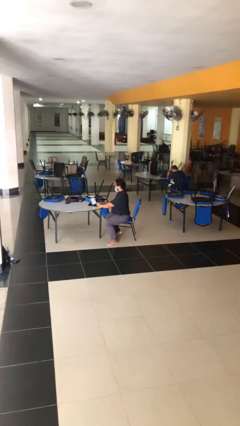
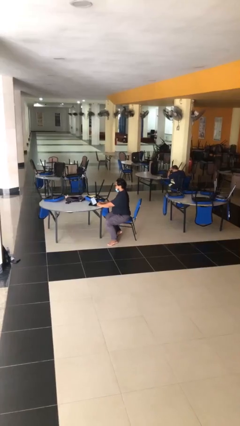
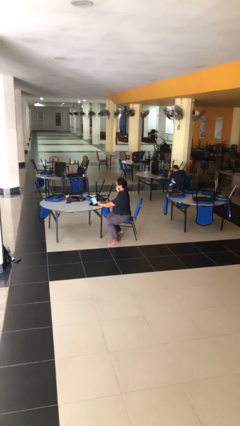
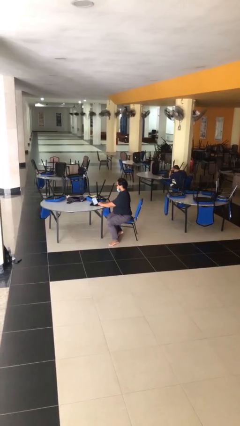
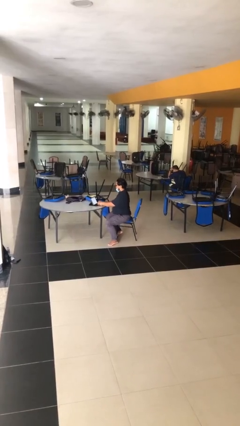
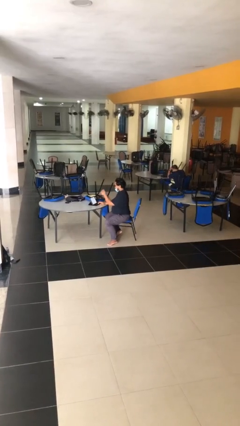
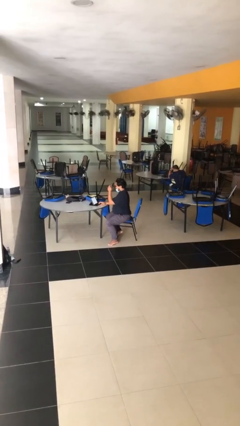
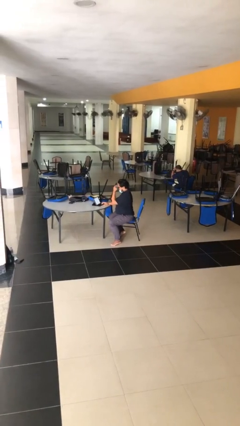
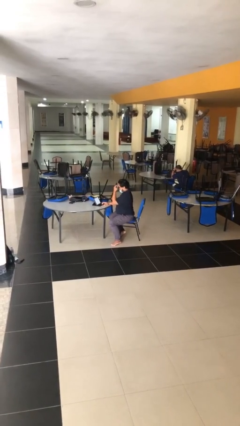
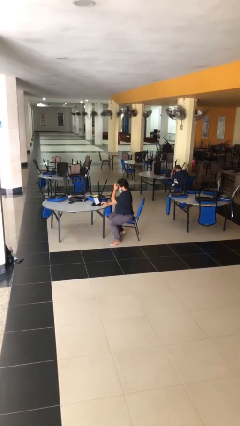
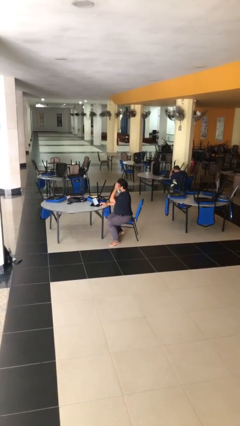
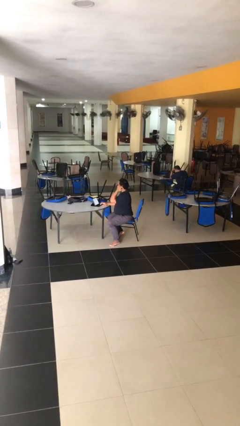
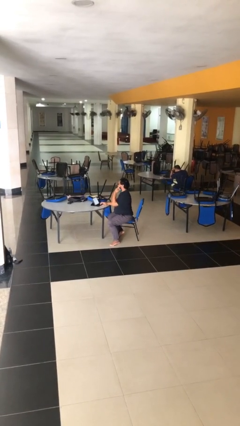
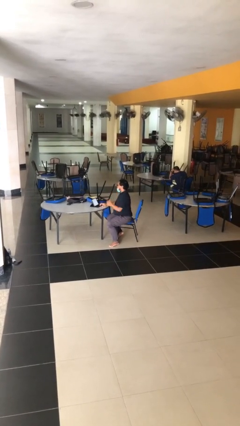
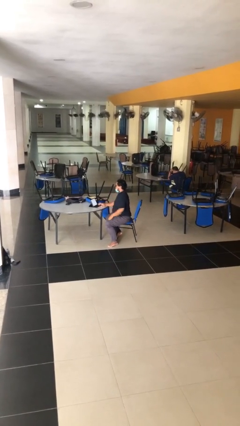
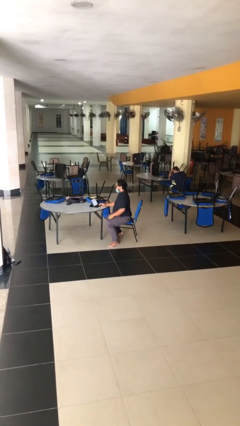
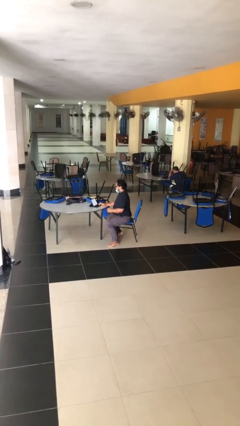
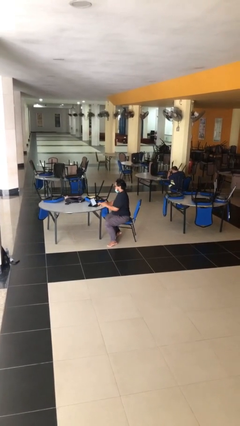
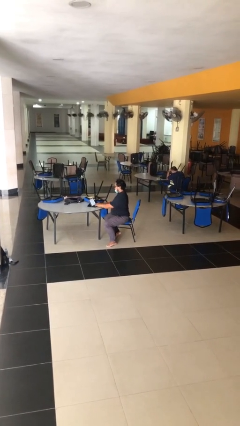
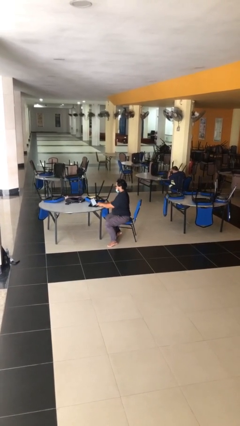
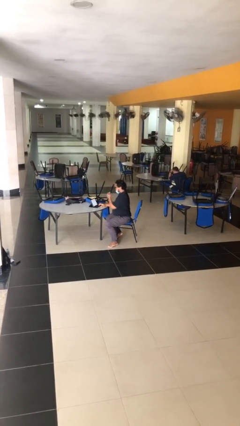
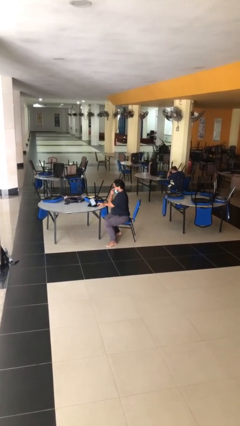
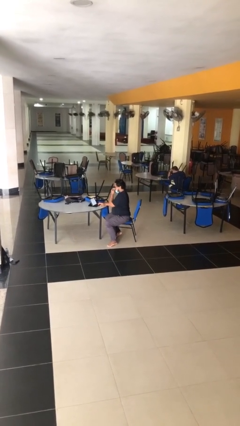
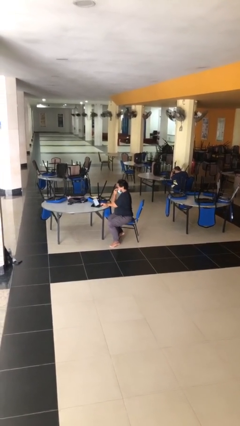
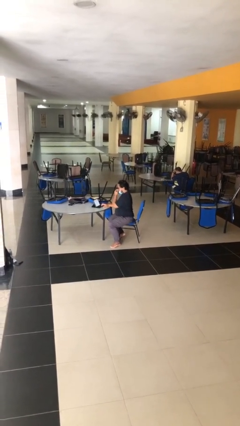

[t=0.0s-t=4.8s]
person interacts with laptop

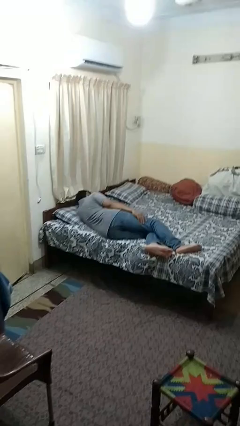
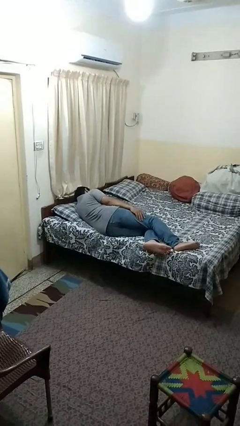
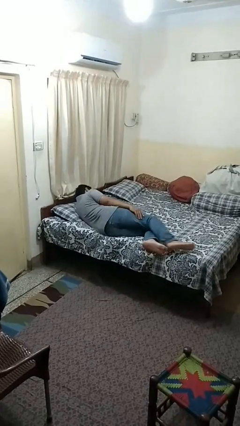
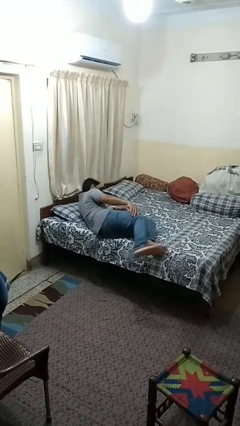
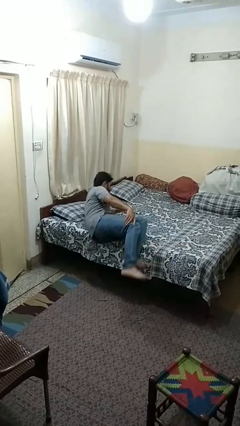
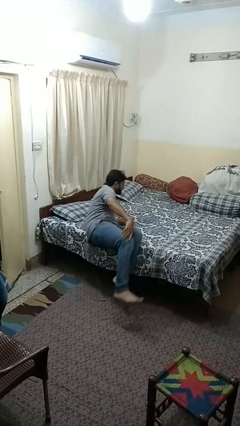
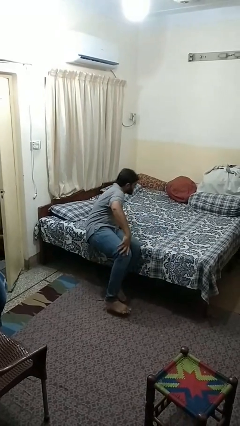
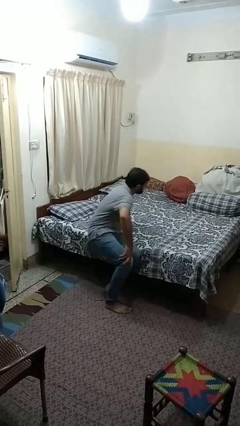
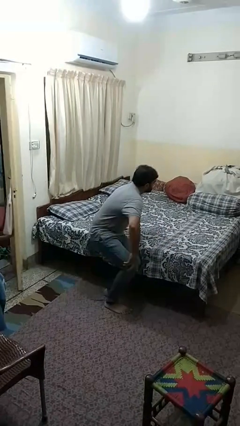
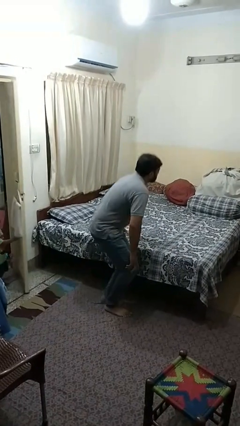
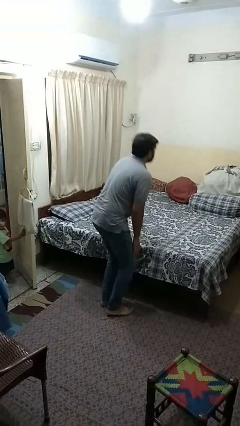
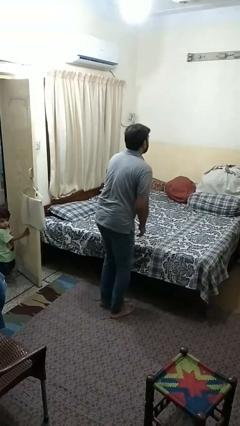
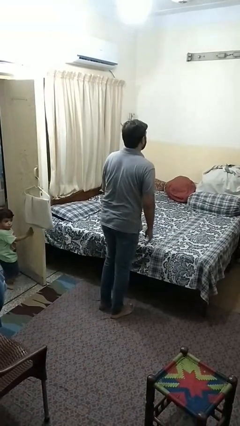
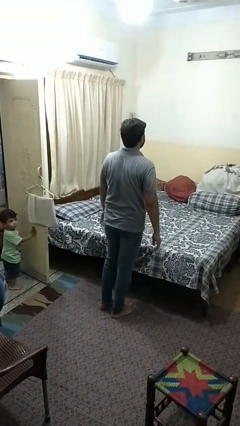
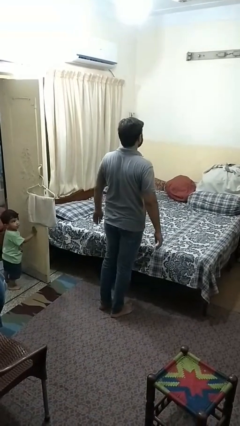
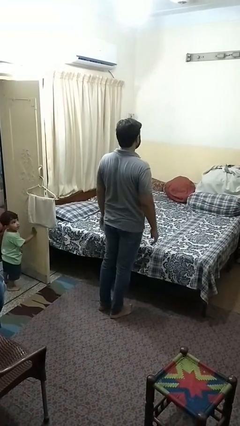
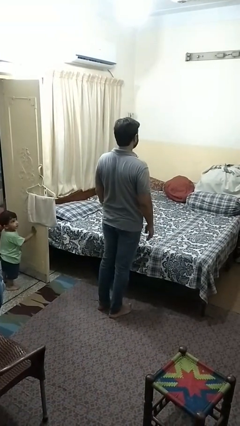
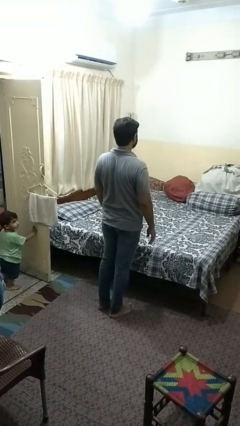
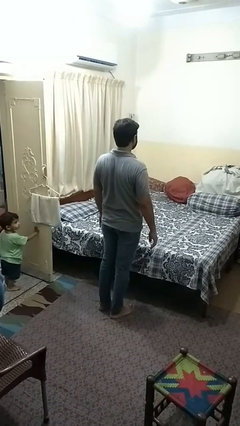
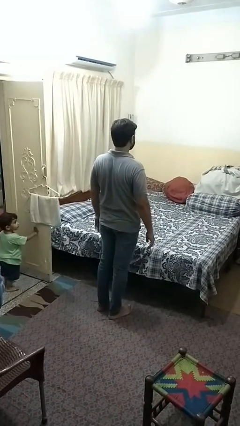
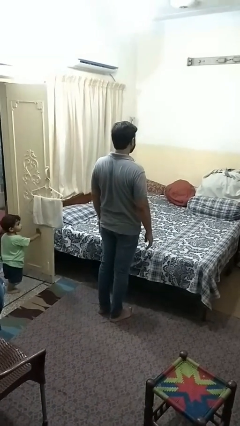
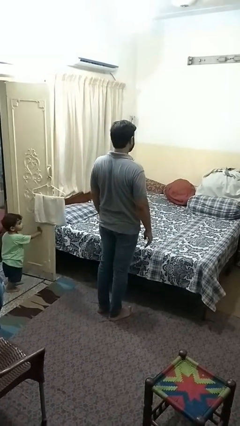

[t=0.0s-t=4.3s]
person stands up

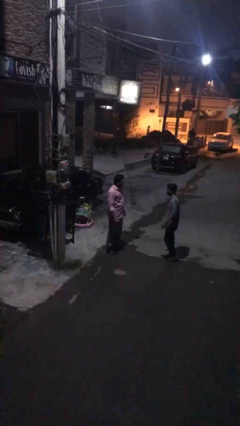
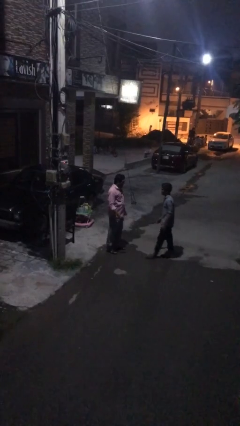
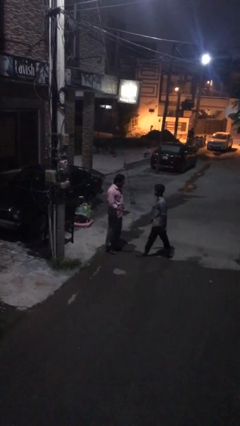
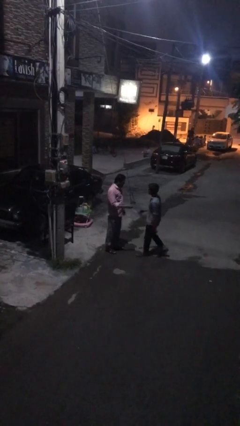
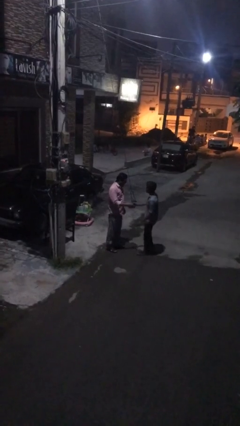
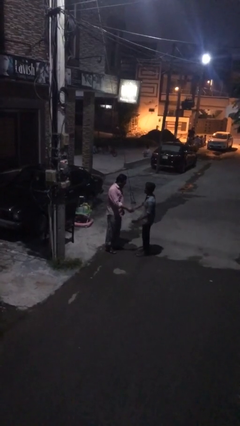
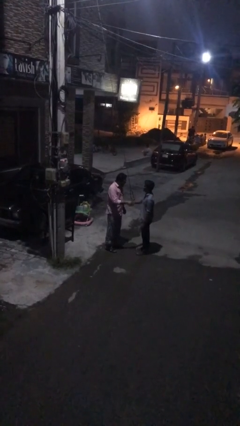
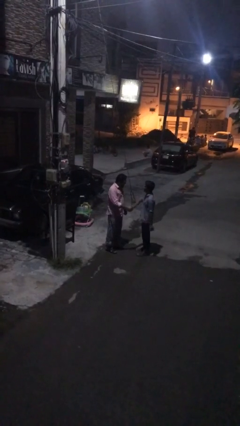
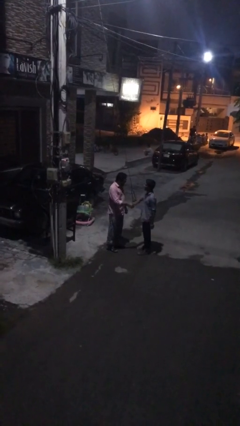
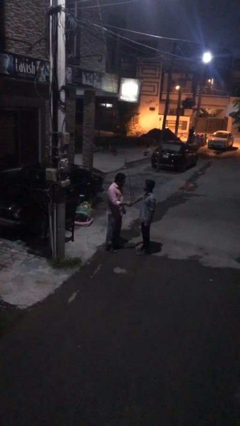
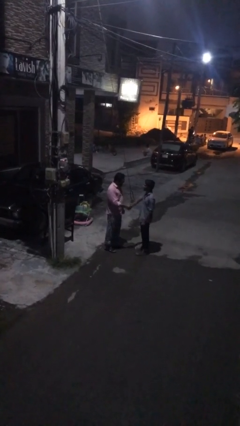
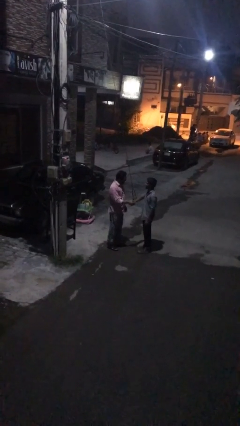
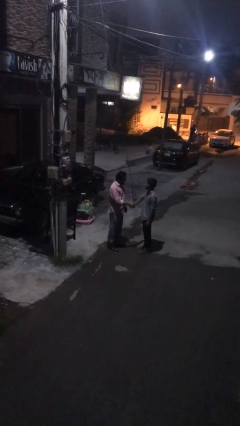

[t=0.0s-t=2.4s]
person shakes hand

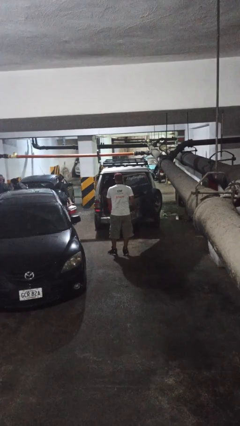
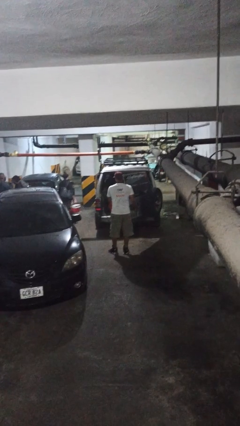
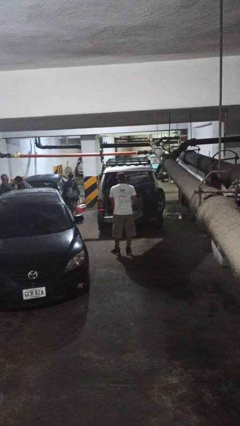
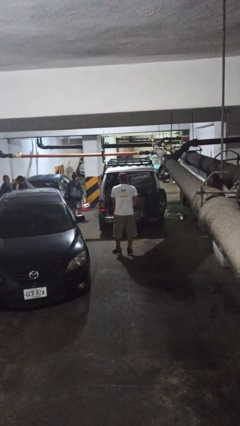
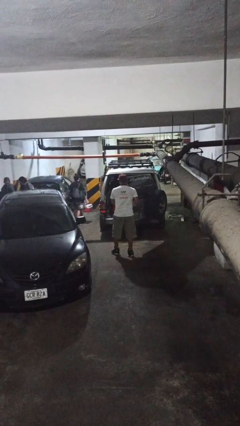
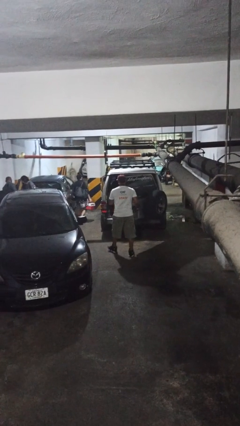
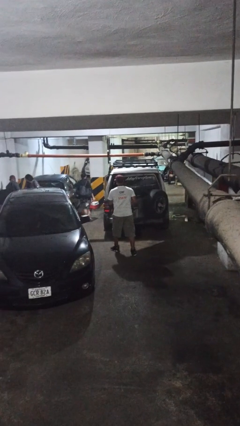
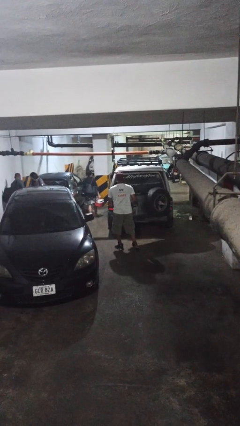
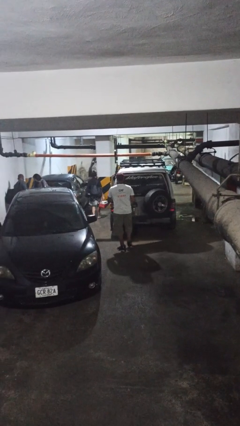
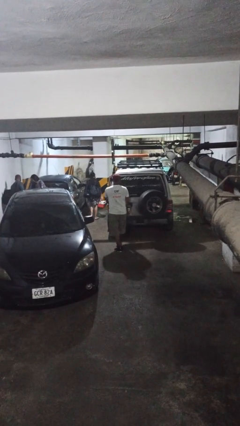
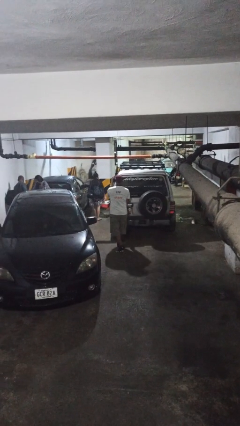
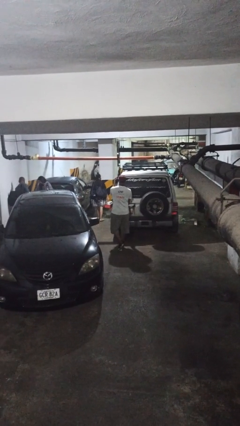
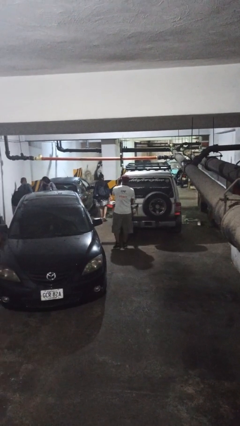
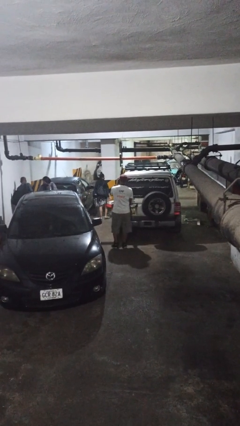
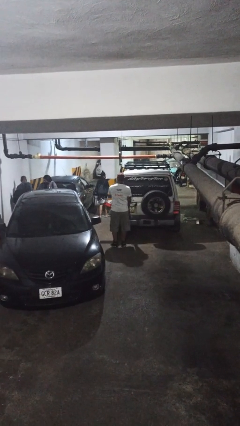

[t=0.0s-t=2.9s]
person closes car trunk

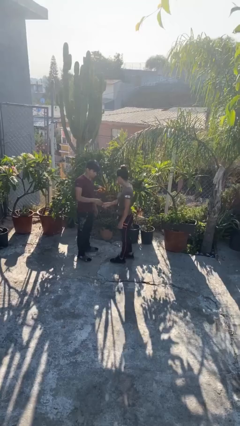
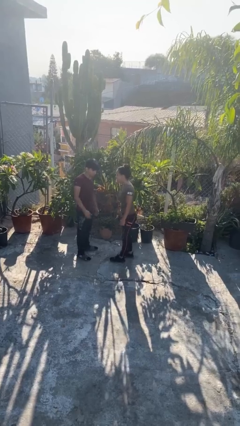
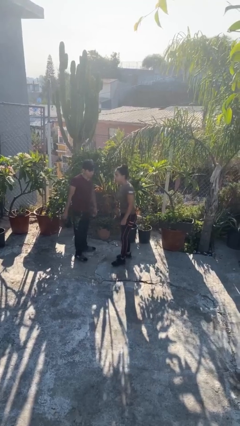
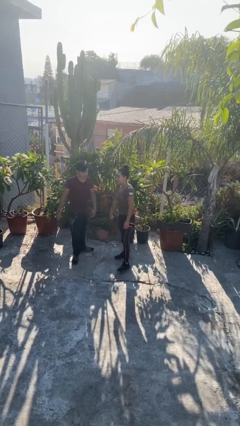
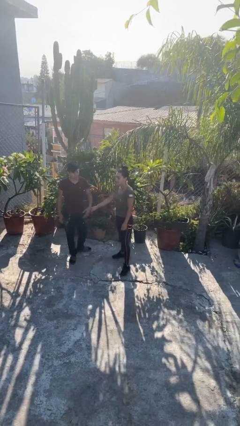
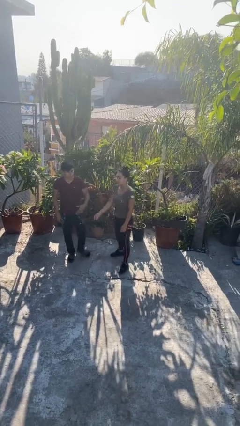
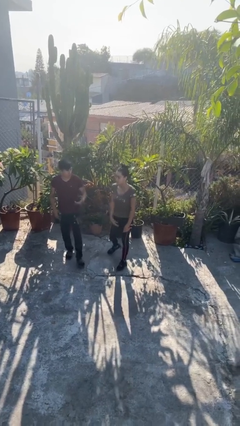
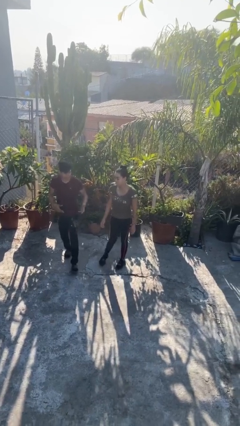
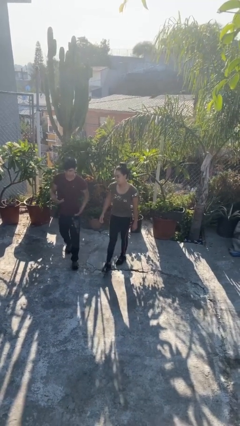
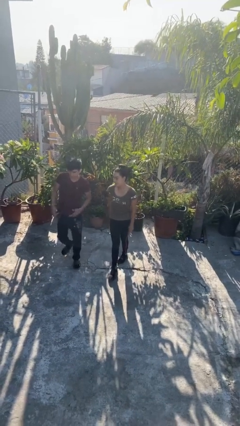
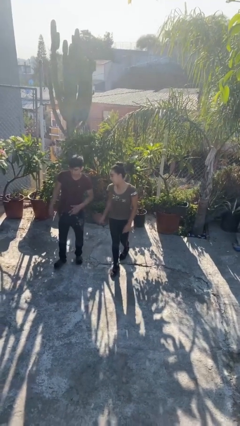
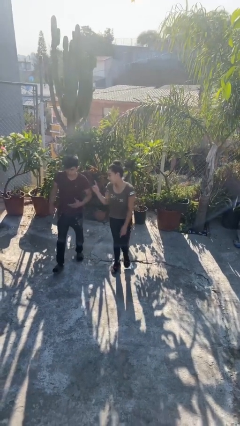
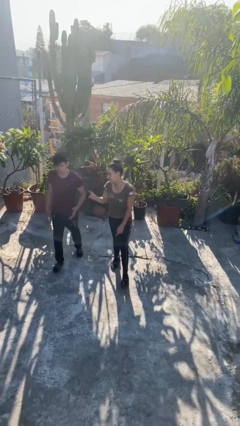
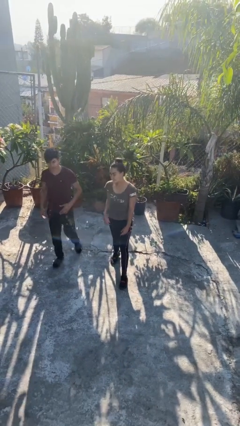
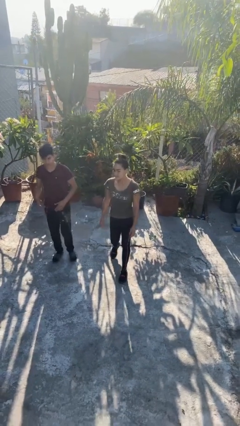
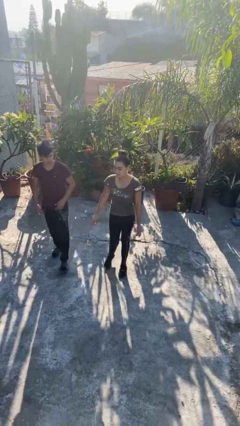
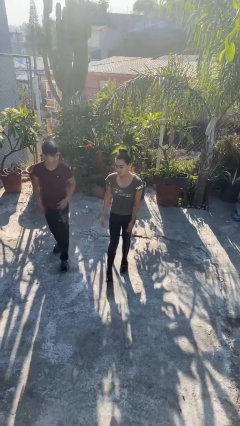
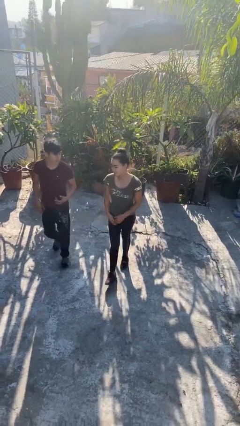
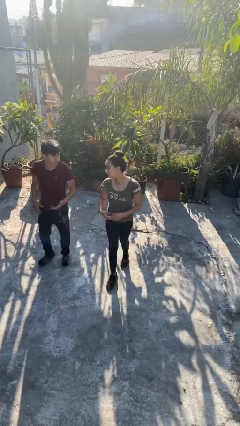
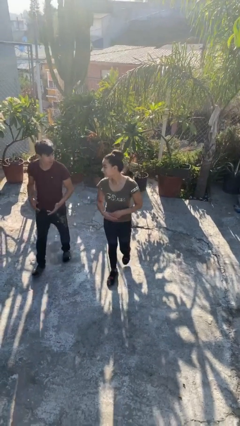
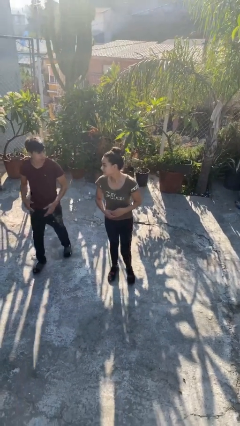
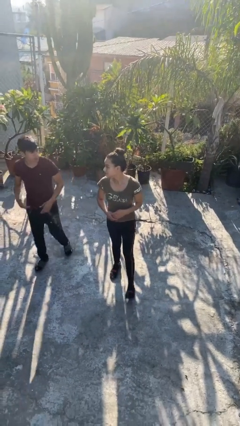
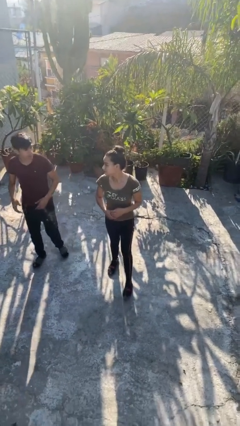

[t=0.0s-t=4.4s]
person talks to person
